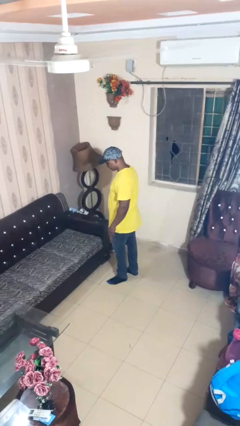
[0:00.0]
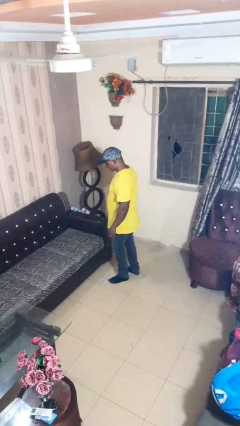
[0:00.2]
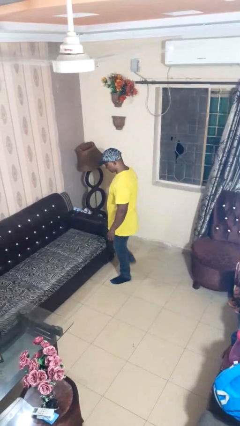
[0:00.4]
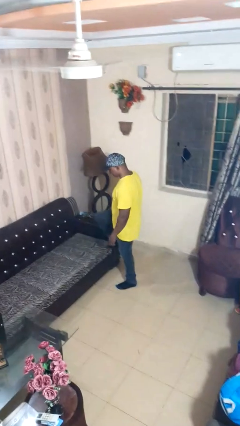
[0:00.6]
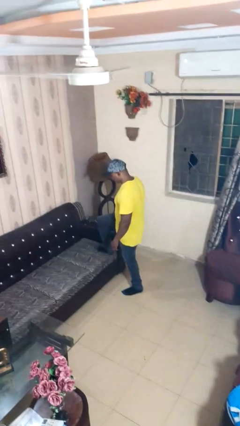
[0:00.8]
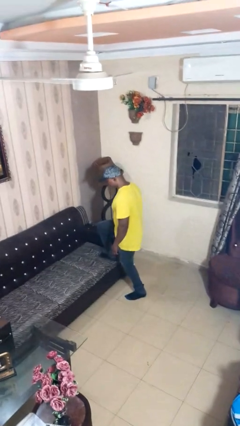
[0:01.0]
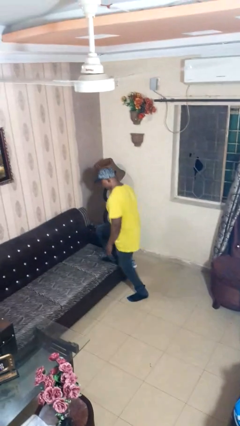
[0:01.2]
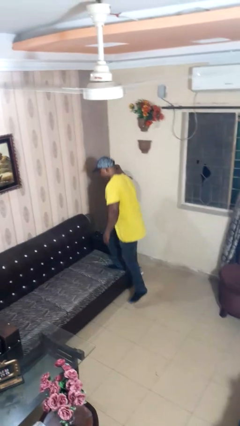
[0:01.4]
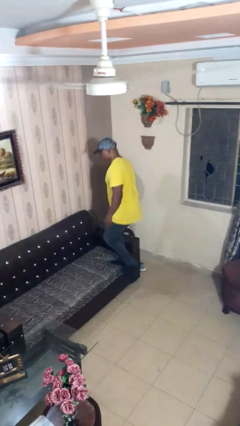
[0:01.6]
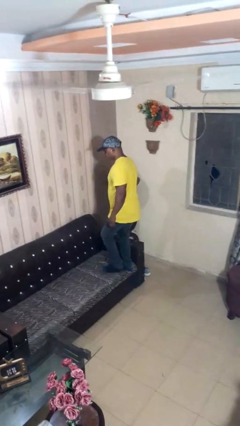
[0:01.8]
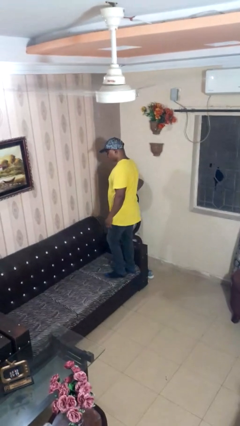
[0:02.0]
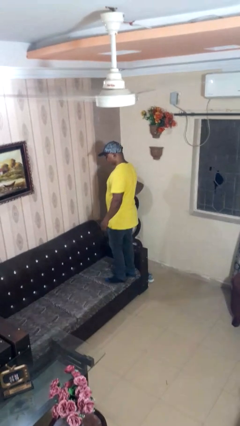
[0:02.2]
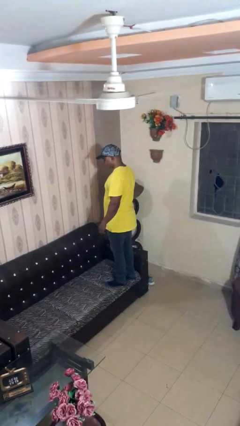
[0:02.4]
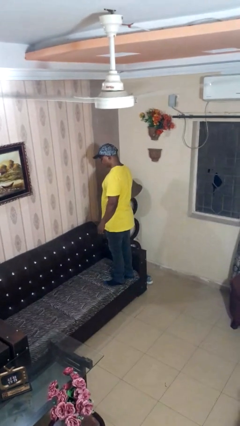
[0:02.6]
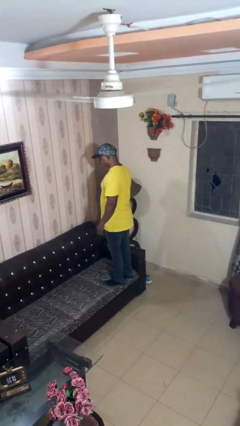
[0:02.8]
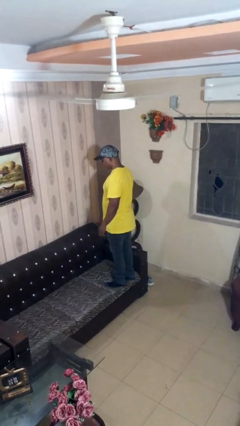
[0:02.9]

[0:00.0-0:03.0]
person climbs on couch

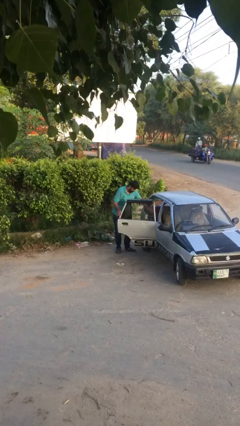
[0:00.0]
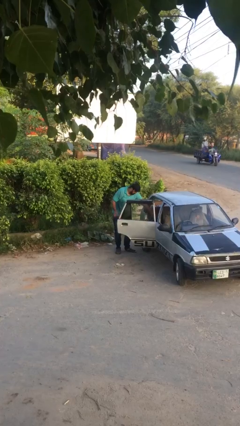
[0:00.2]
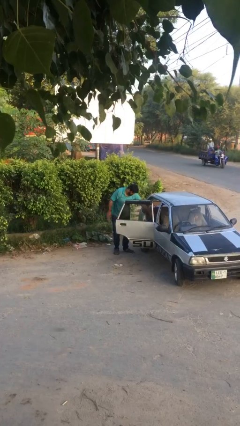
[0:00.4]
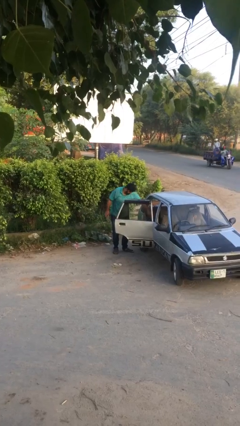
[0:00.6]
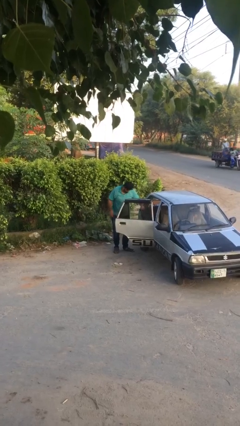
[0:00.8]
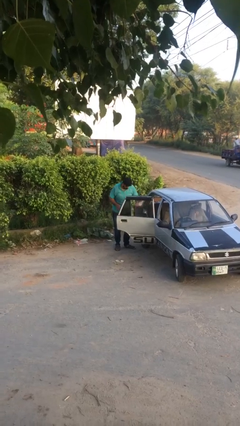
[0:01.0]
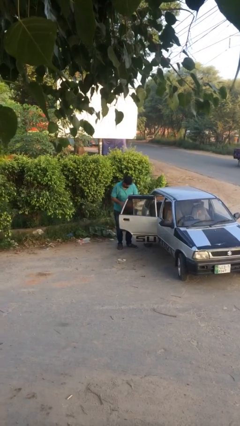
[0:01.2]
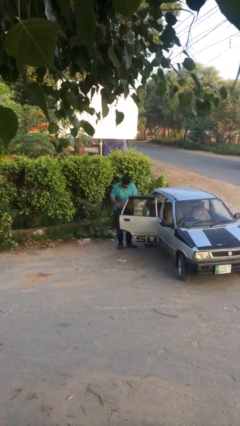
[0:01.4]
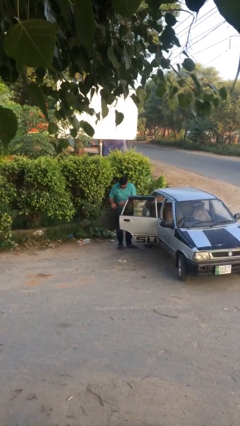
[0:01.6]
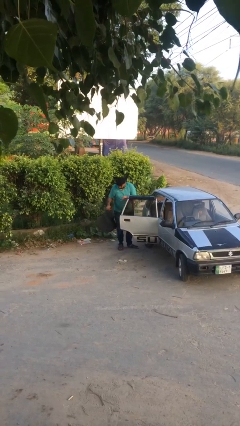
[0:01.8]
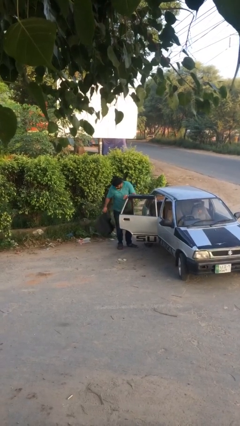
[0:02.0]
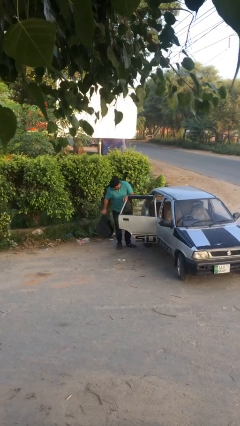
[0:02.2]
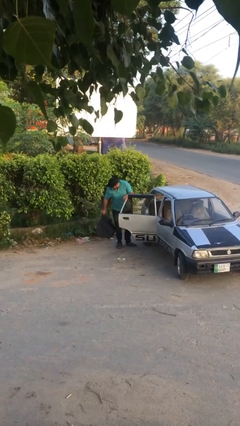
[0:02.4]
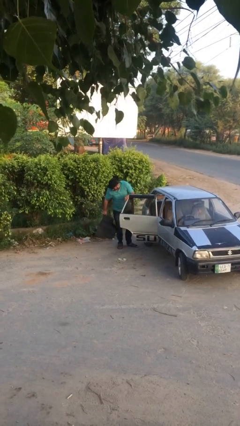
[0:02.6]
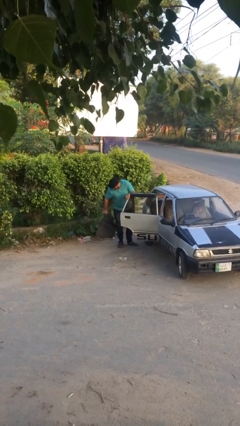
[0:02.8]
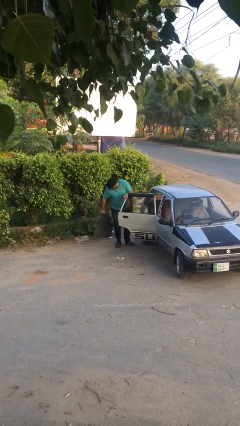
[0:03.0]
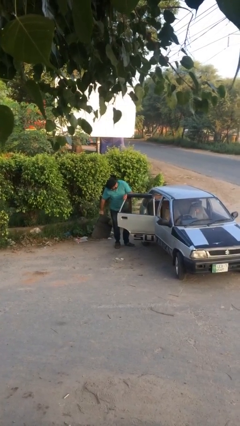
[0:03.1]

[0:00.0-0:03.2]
person unloads car

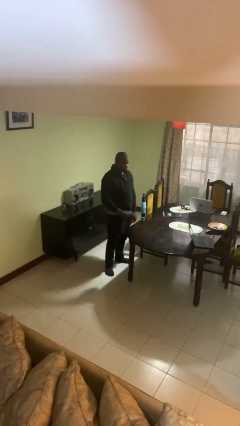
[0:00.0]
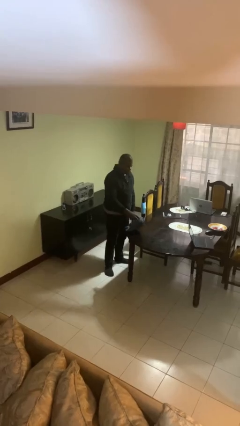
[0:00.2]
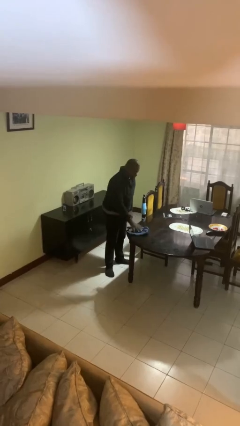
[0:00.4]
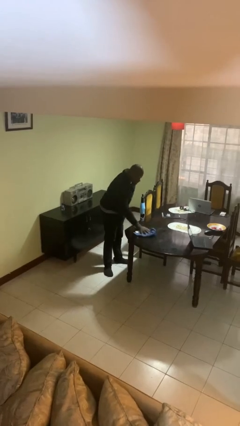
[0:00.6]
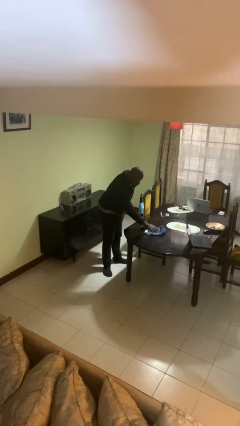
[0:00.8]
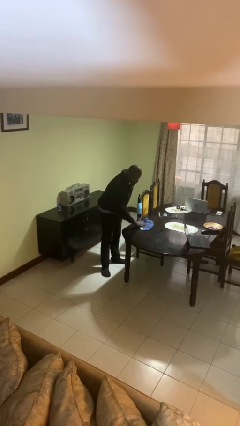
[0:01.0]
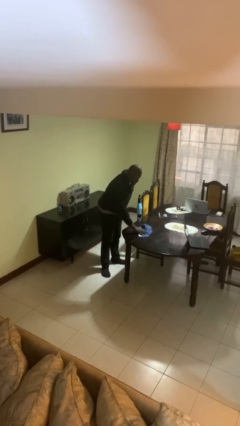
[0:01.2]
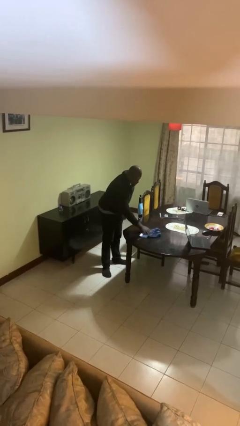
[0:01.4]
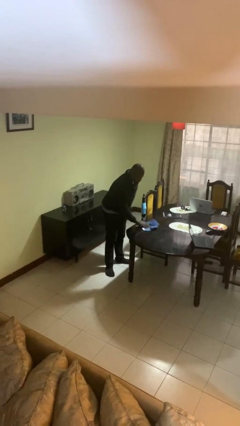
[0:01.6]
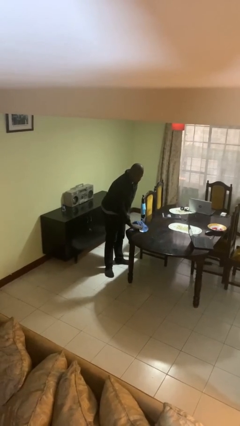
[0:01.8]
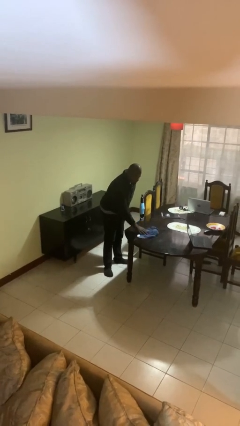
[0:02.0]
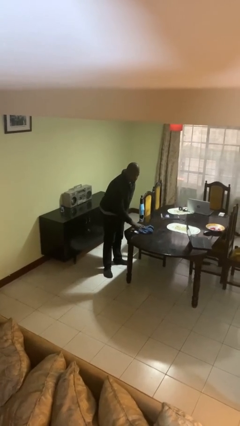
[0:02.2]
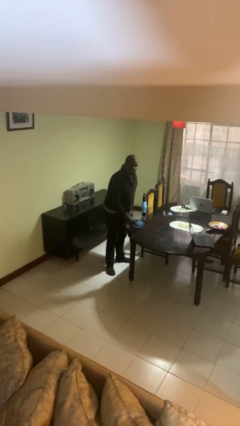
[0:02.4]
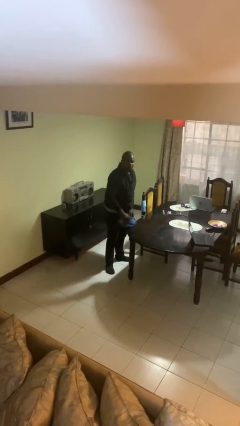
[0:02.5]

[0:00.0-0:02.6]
person cleans table with rag

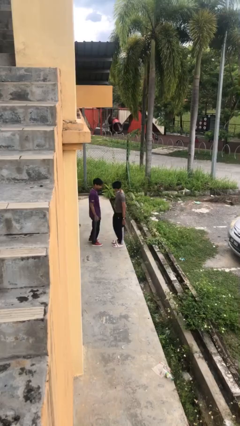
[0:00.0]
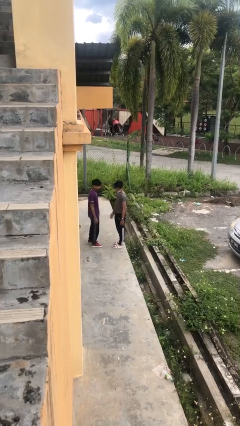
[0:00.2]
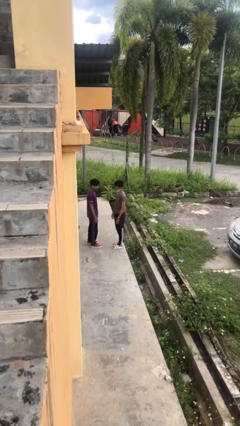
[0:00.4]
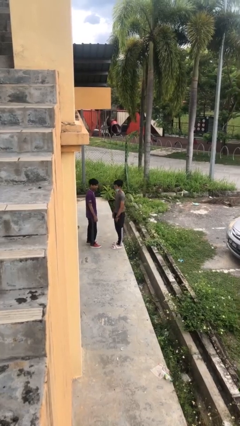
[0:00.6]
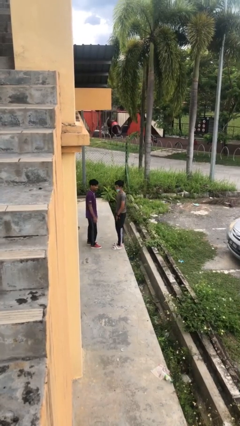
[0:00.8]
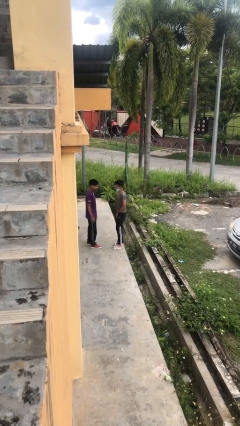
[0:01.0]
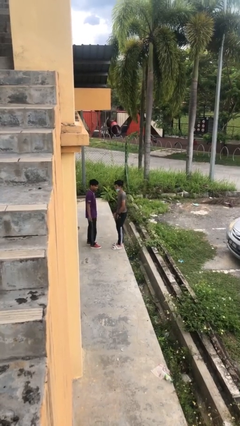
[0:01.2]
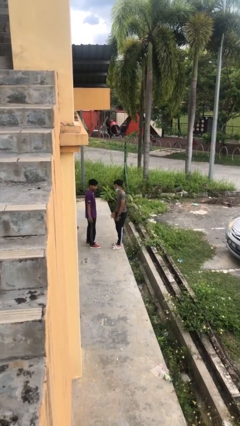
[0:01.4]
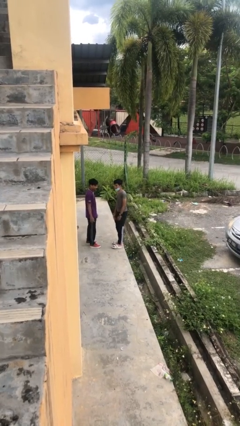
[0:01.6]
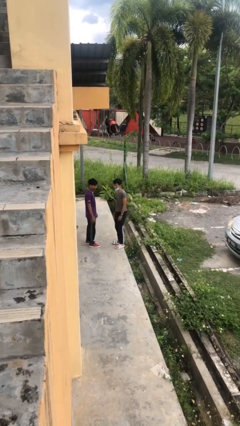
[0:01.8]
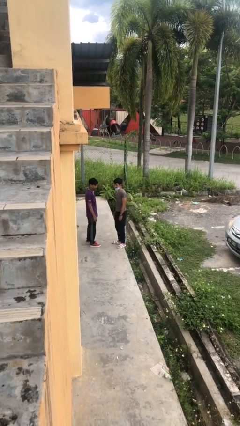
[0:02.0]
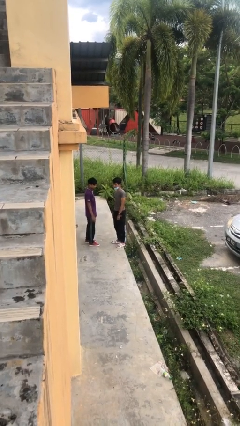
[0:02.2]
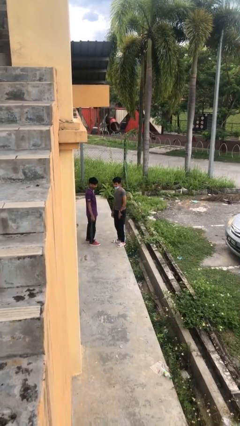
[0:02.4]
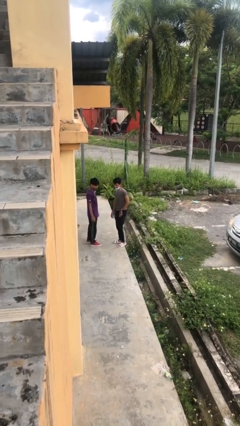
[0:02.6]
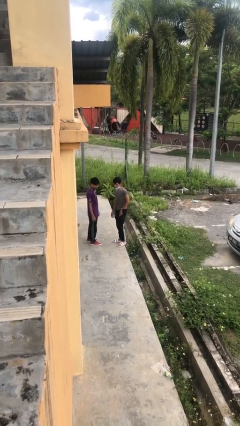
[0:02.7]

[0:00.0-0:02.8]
person talks to person

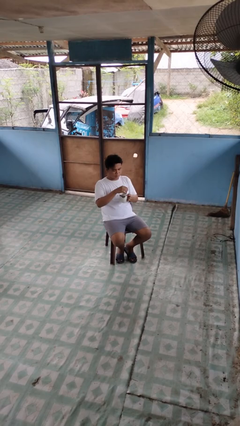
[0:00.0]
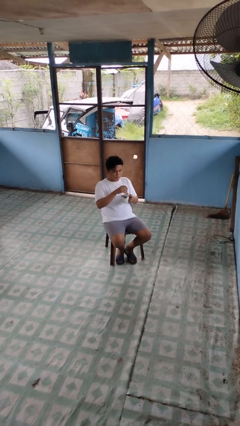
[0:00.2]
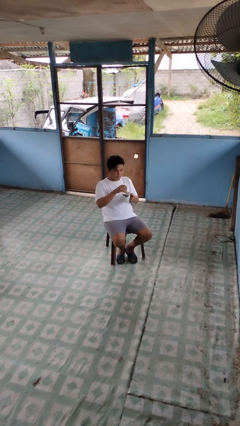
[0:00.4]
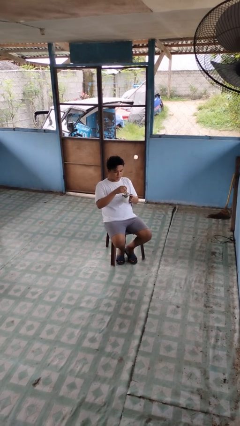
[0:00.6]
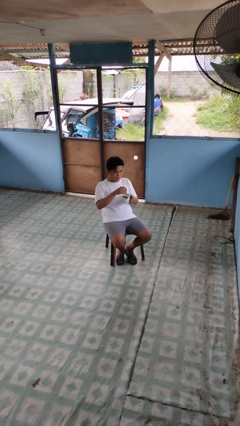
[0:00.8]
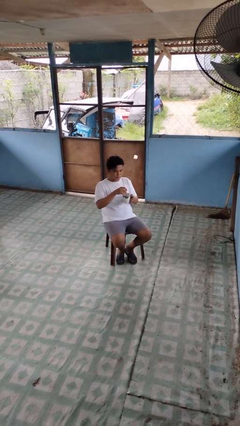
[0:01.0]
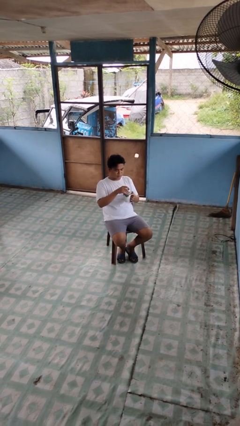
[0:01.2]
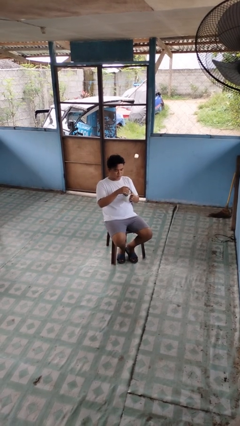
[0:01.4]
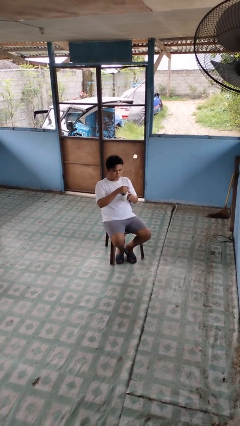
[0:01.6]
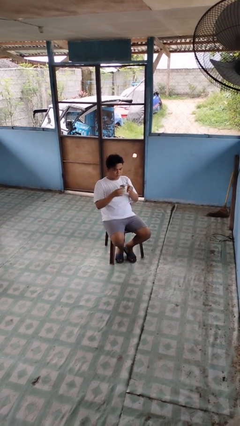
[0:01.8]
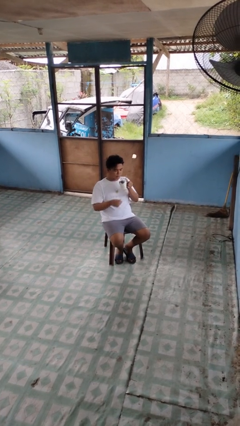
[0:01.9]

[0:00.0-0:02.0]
person stirs mug

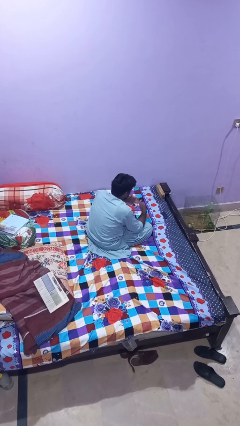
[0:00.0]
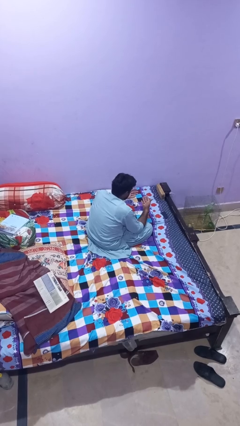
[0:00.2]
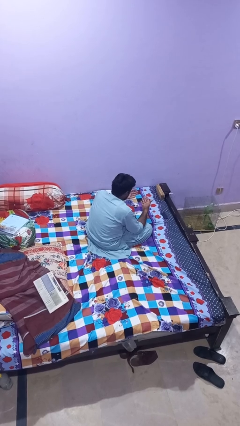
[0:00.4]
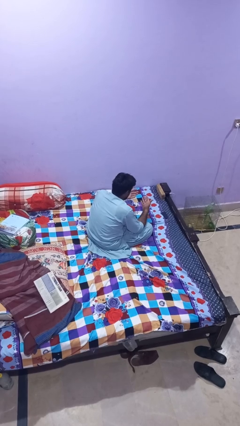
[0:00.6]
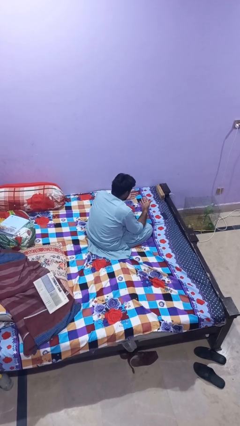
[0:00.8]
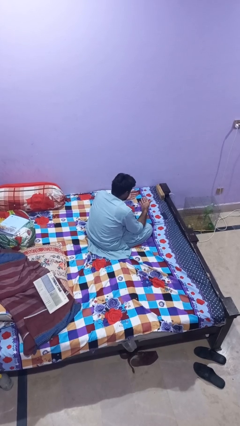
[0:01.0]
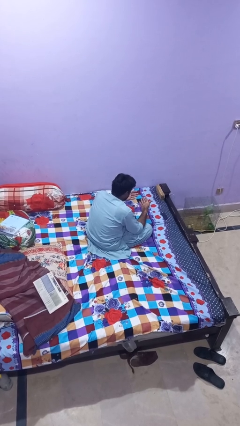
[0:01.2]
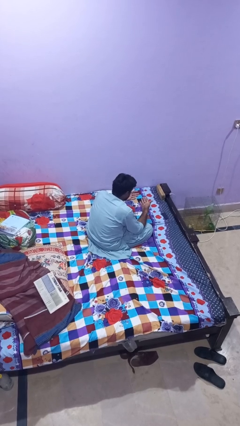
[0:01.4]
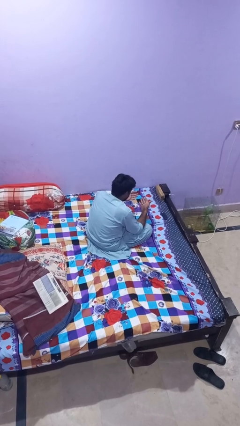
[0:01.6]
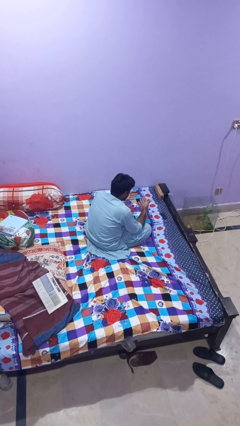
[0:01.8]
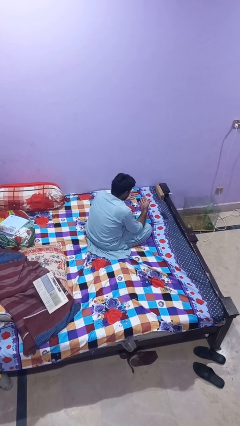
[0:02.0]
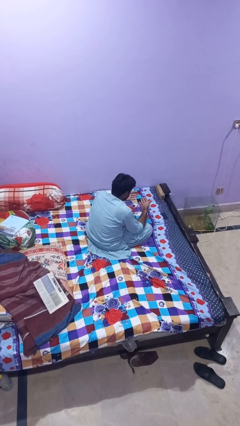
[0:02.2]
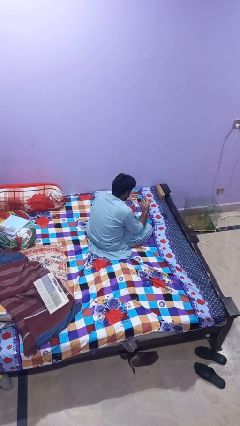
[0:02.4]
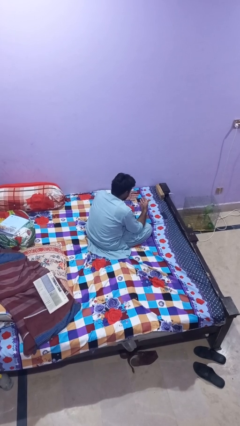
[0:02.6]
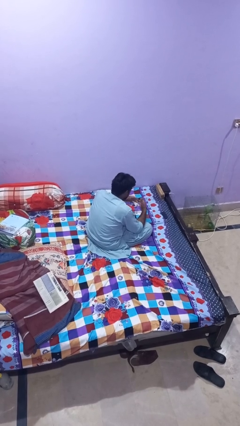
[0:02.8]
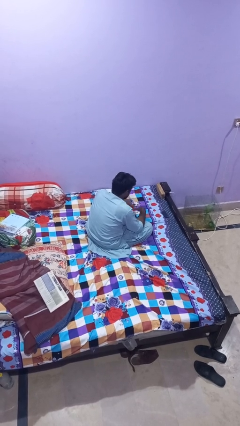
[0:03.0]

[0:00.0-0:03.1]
person looks at hands in lap

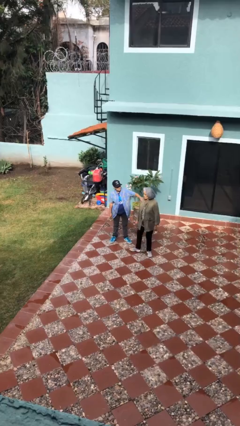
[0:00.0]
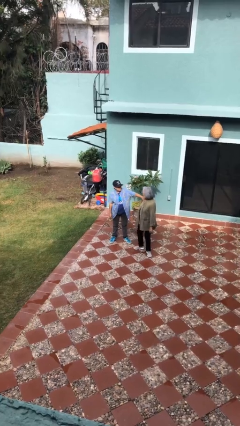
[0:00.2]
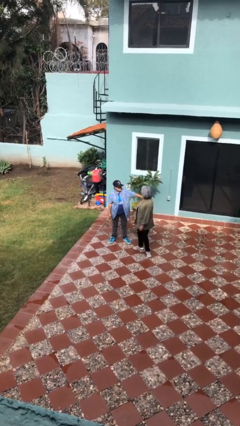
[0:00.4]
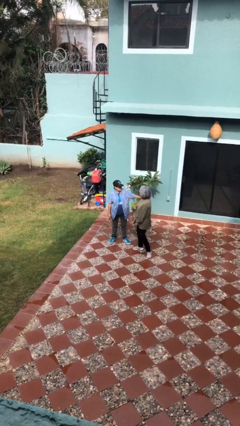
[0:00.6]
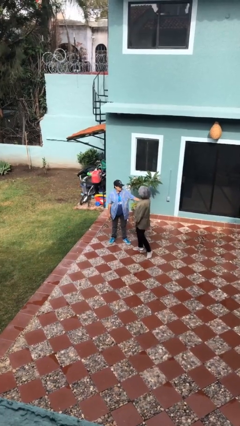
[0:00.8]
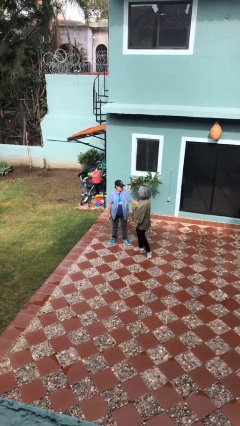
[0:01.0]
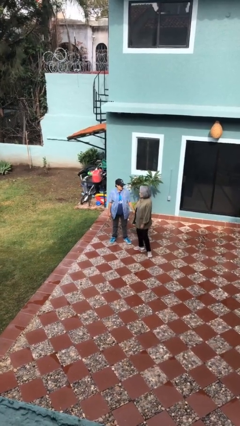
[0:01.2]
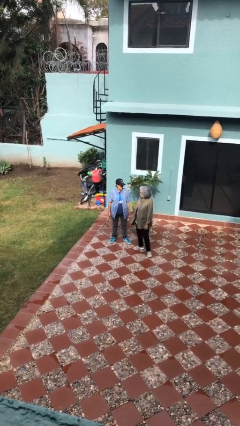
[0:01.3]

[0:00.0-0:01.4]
person spins person around
